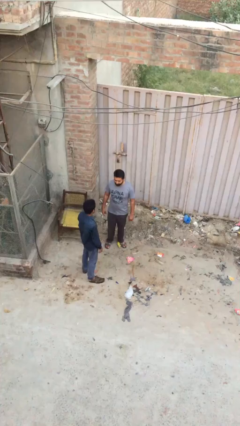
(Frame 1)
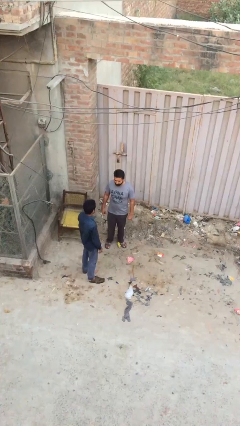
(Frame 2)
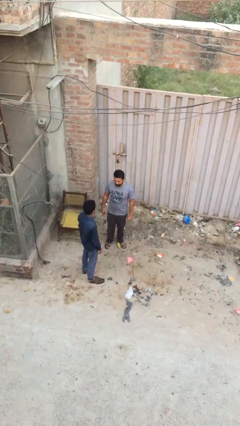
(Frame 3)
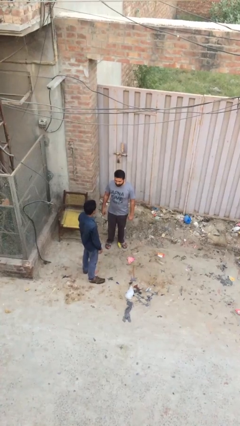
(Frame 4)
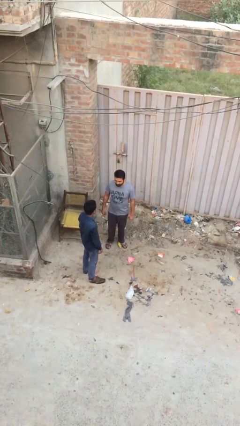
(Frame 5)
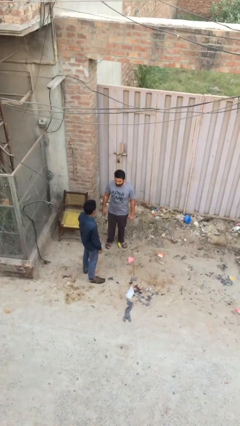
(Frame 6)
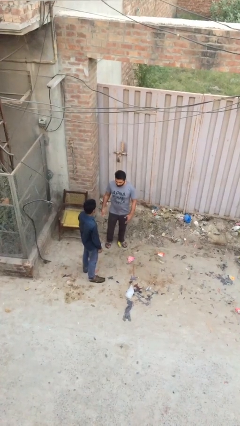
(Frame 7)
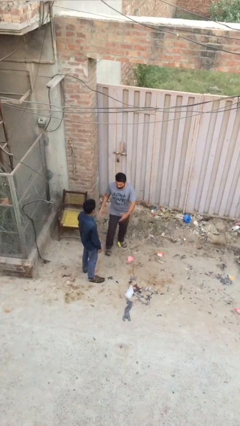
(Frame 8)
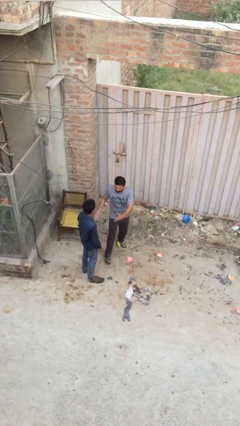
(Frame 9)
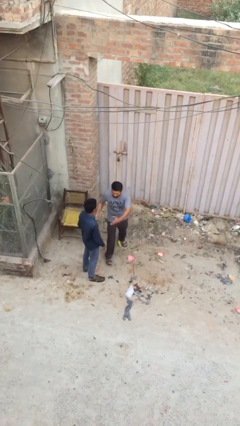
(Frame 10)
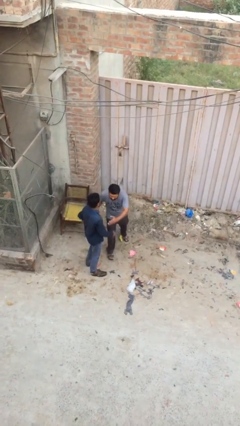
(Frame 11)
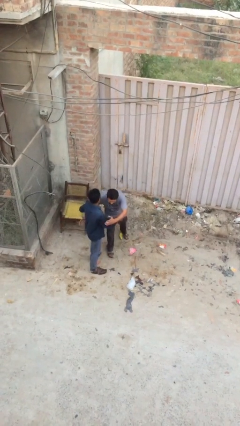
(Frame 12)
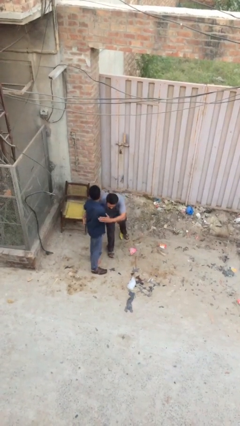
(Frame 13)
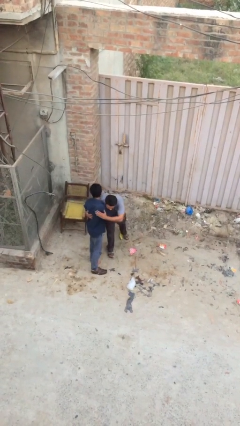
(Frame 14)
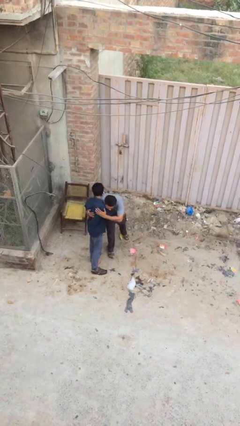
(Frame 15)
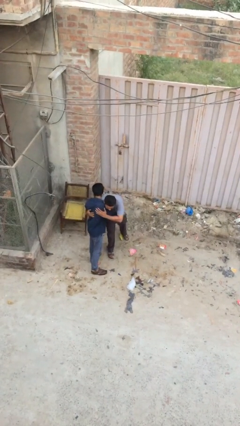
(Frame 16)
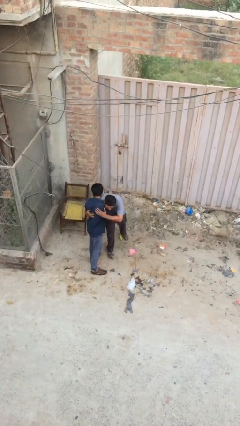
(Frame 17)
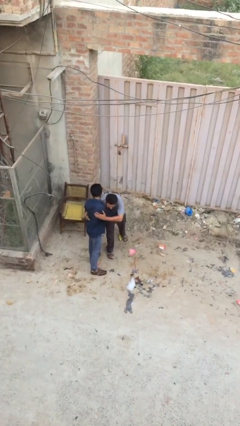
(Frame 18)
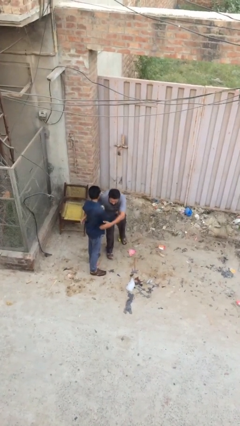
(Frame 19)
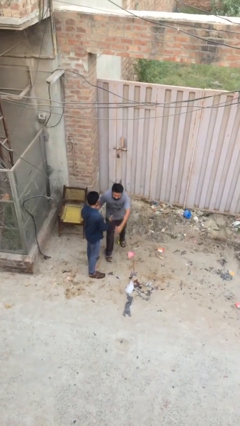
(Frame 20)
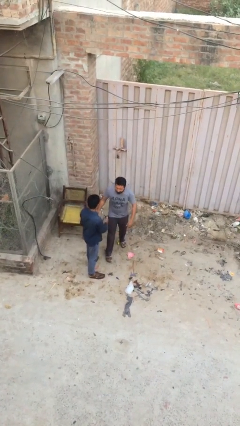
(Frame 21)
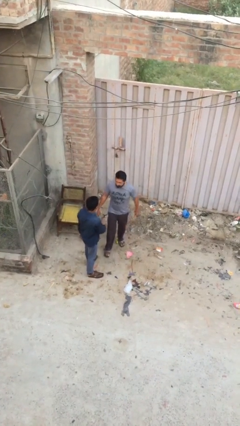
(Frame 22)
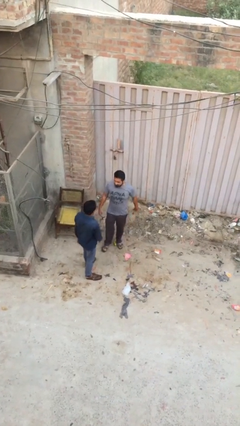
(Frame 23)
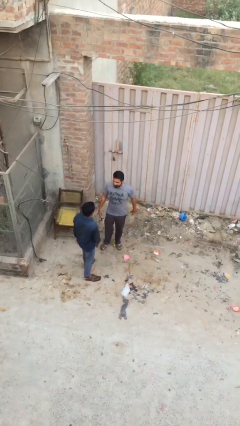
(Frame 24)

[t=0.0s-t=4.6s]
person embraces person

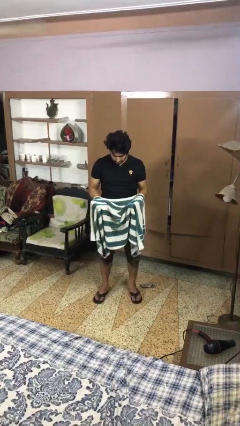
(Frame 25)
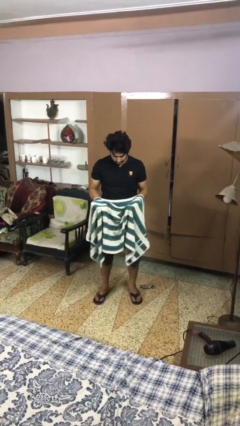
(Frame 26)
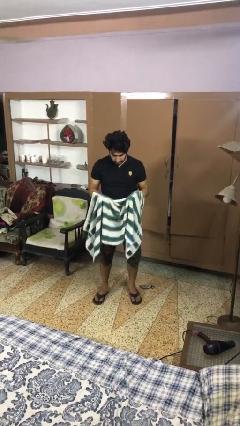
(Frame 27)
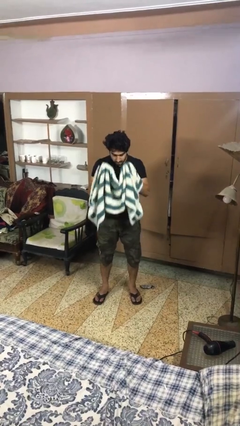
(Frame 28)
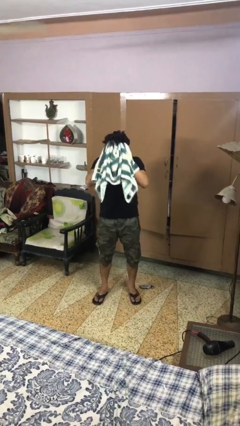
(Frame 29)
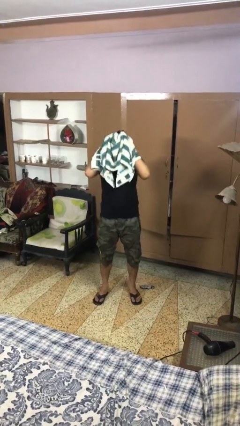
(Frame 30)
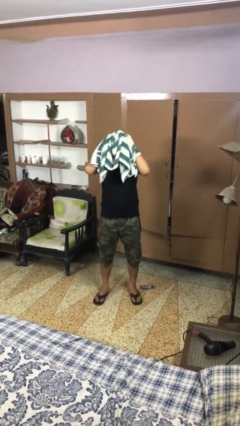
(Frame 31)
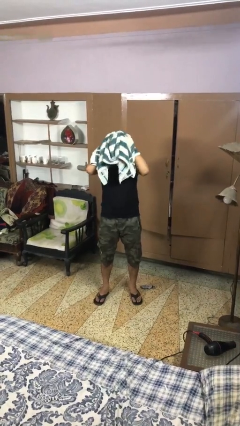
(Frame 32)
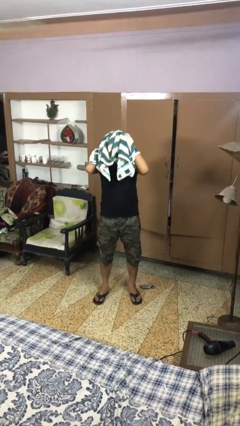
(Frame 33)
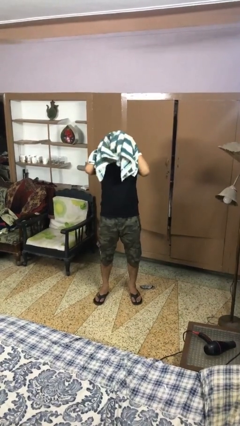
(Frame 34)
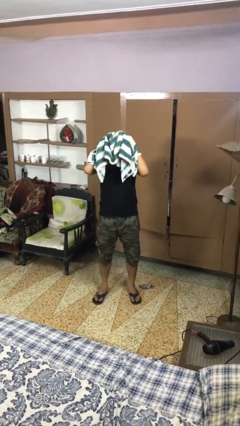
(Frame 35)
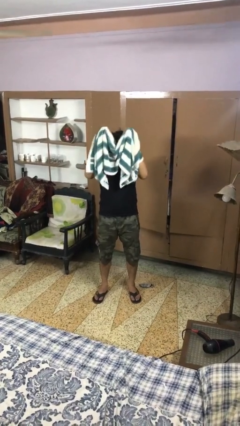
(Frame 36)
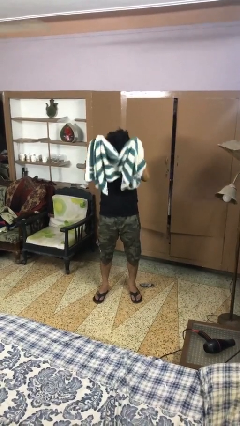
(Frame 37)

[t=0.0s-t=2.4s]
person dries hair with towel

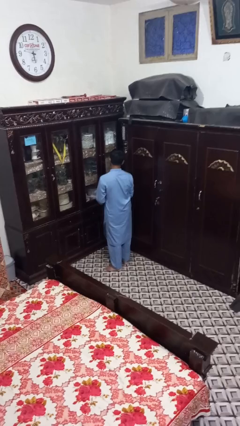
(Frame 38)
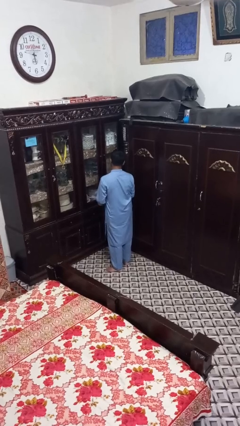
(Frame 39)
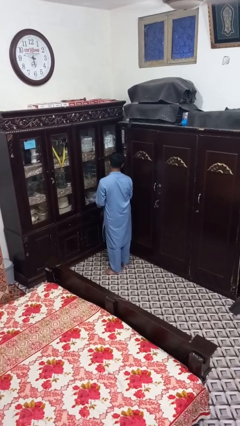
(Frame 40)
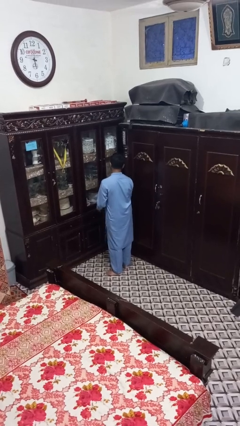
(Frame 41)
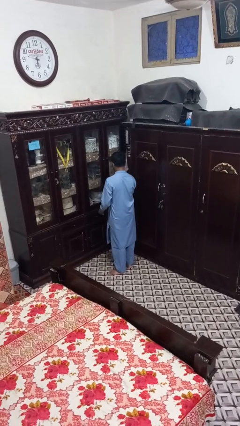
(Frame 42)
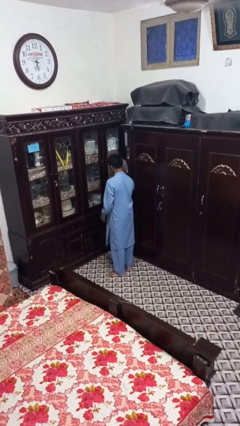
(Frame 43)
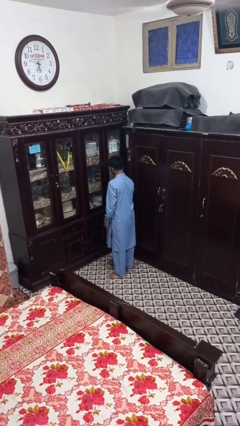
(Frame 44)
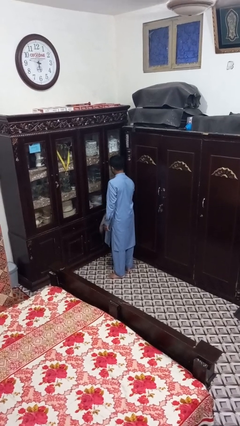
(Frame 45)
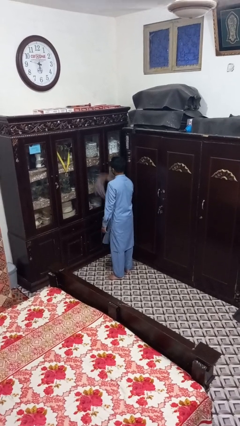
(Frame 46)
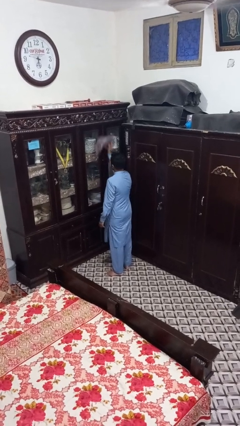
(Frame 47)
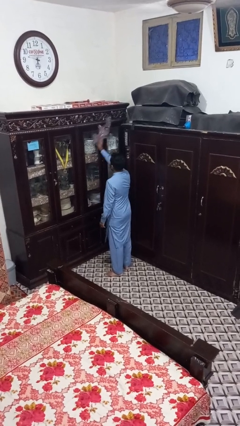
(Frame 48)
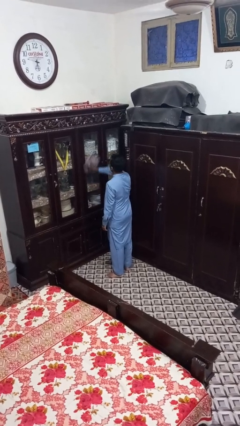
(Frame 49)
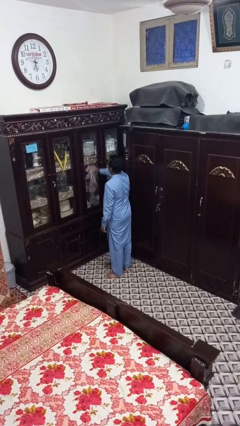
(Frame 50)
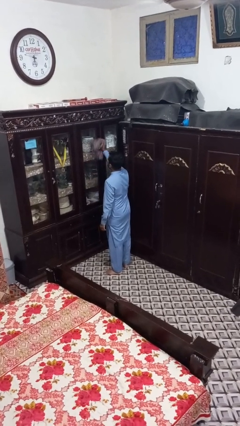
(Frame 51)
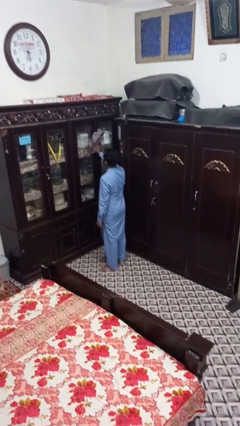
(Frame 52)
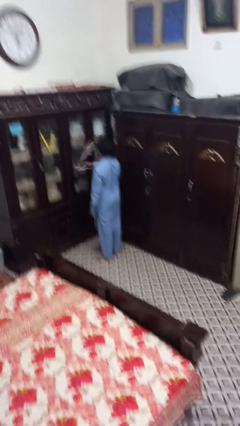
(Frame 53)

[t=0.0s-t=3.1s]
person dusts furniture

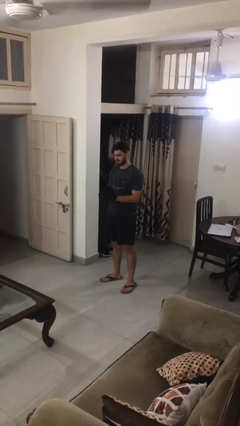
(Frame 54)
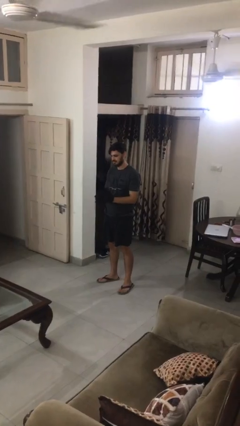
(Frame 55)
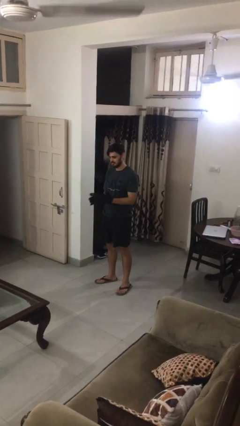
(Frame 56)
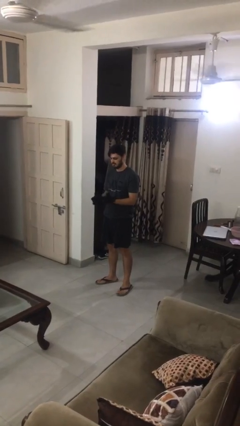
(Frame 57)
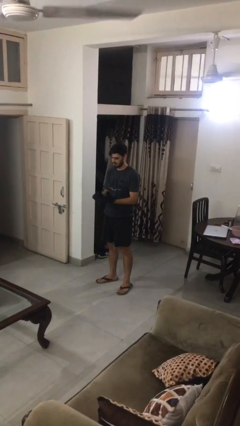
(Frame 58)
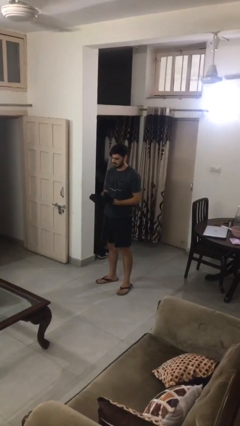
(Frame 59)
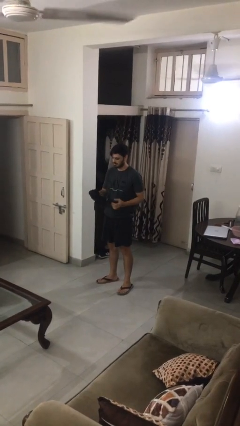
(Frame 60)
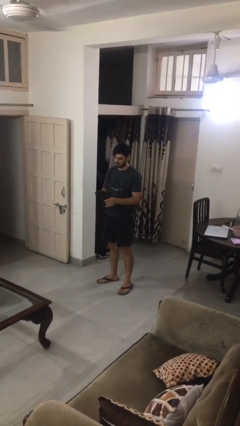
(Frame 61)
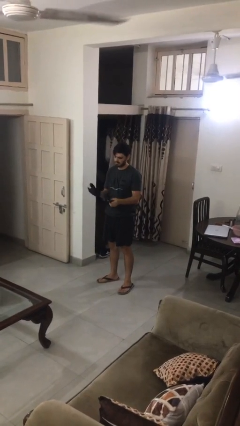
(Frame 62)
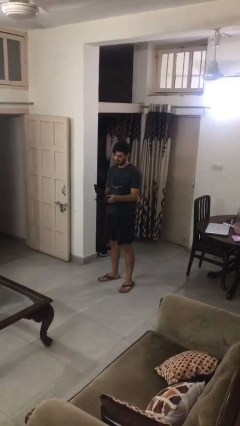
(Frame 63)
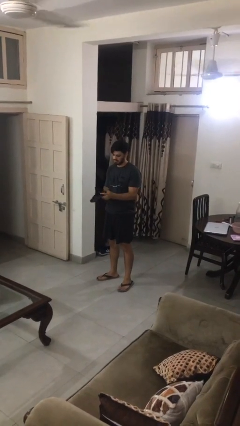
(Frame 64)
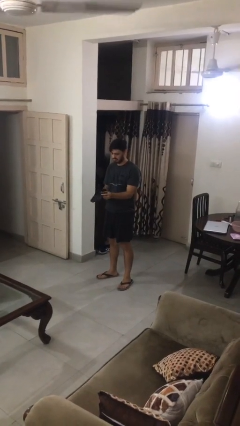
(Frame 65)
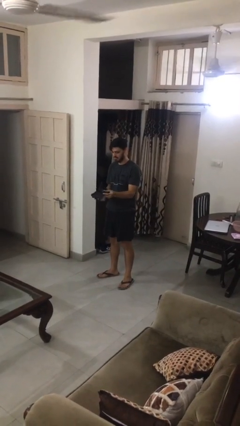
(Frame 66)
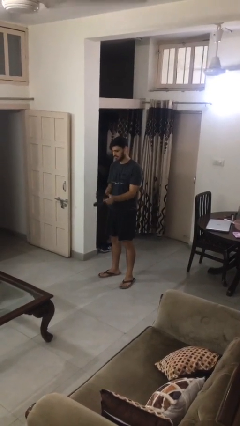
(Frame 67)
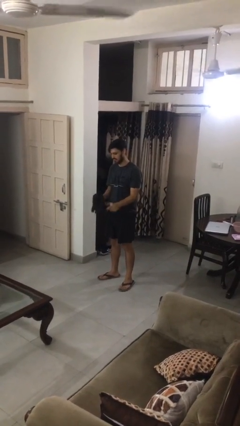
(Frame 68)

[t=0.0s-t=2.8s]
person takes off gloves

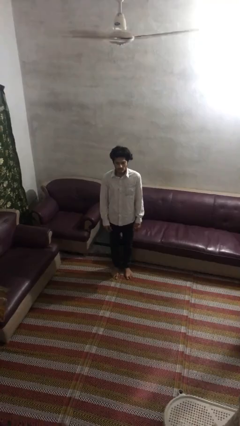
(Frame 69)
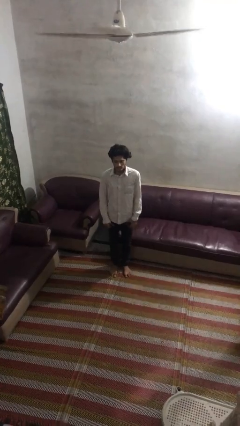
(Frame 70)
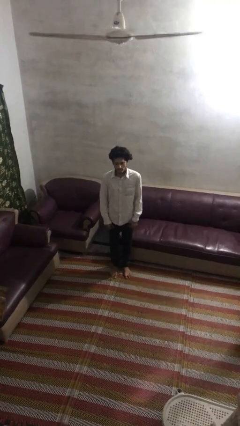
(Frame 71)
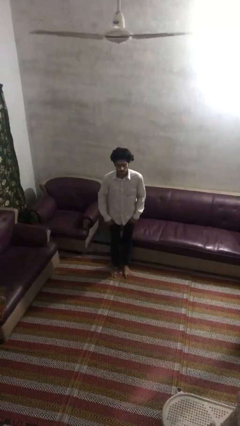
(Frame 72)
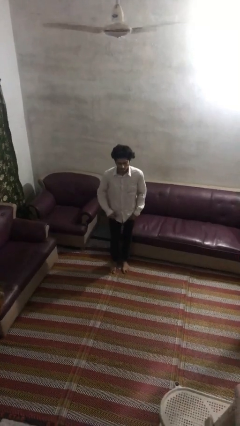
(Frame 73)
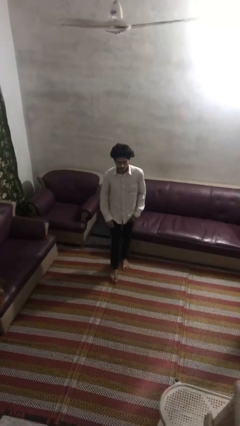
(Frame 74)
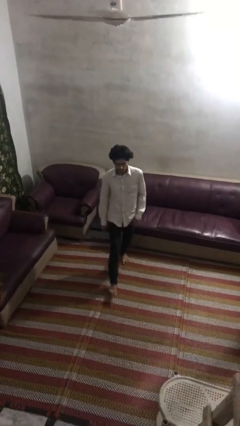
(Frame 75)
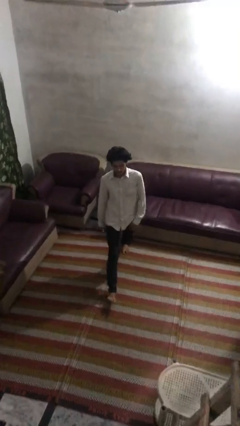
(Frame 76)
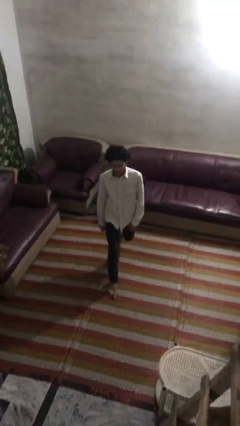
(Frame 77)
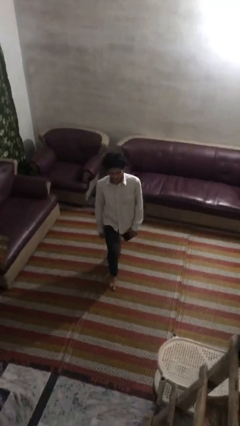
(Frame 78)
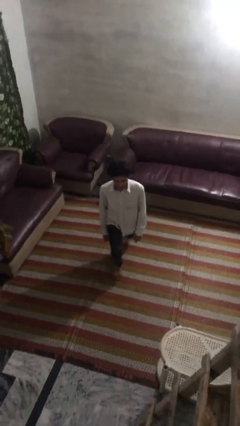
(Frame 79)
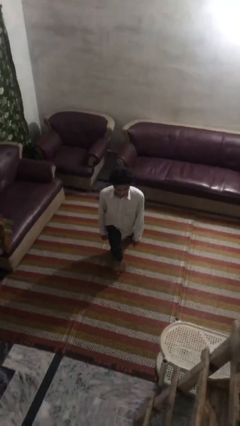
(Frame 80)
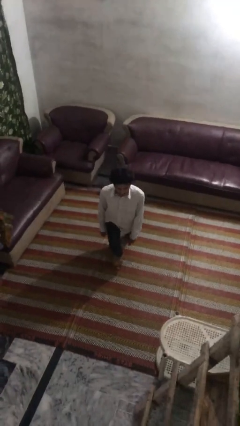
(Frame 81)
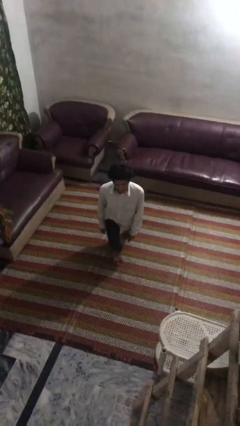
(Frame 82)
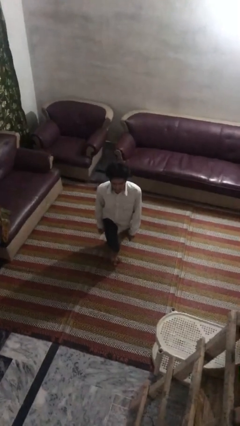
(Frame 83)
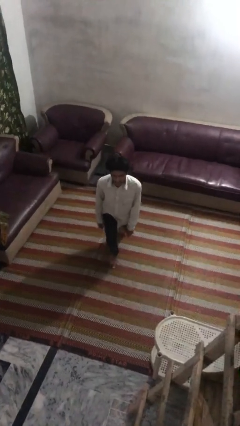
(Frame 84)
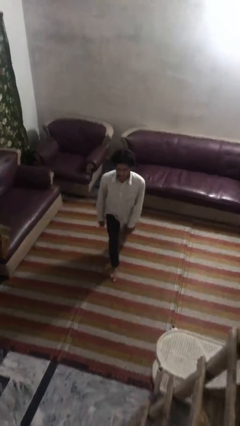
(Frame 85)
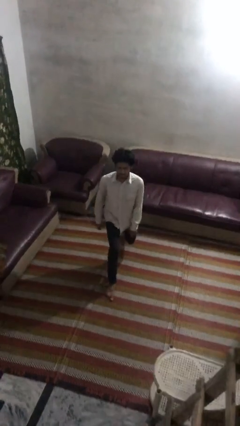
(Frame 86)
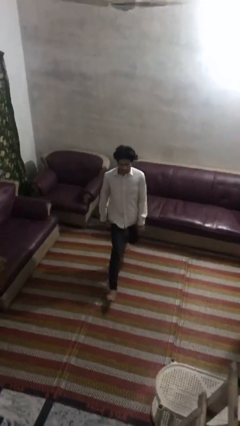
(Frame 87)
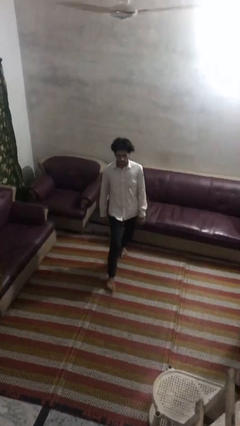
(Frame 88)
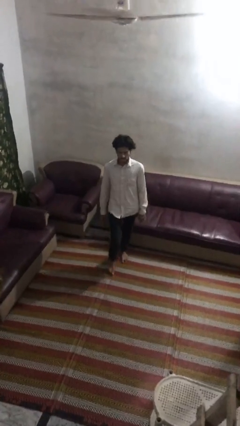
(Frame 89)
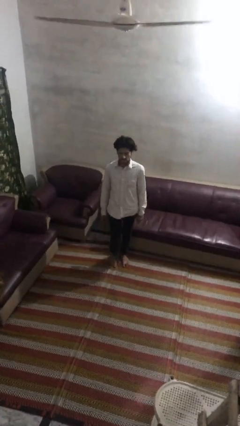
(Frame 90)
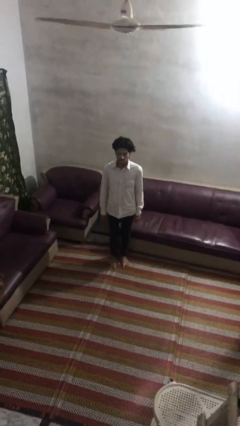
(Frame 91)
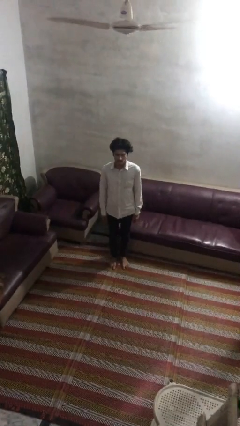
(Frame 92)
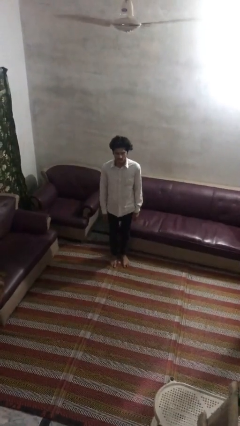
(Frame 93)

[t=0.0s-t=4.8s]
person exercises with lunges
